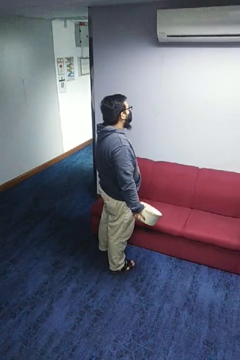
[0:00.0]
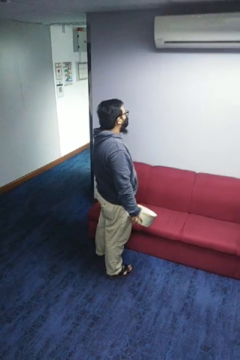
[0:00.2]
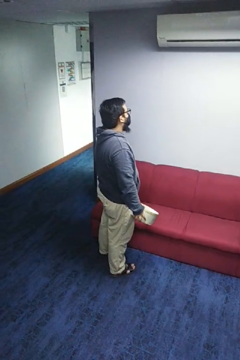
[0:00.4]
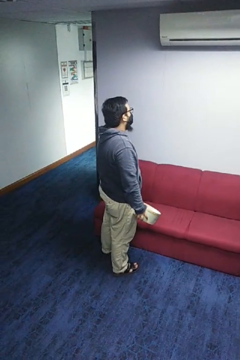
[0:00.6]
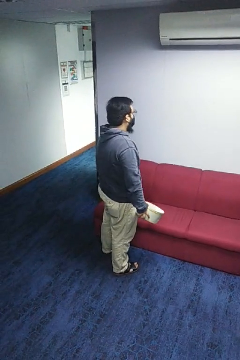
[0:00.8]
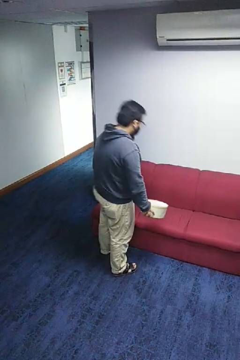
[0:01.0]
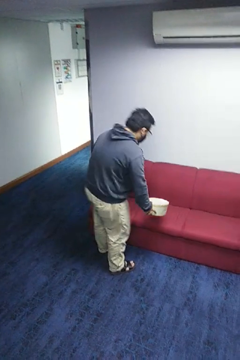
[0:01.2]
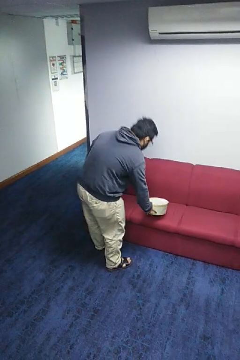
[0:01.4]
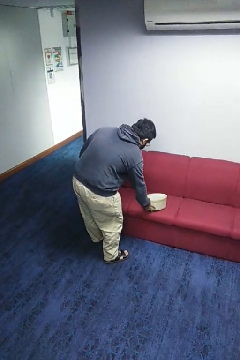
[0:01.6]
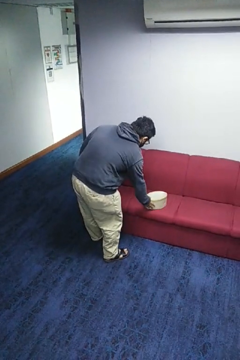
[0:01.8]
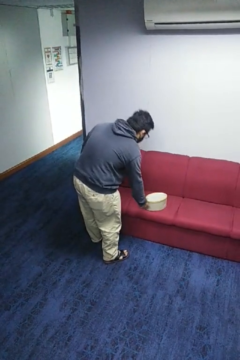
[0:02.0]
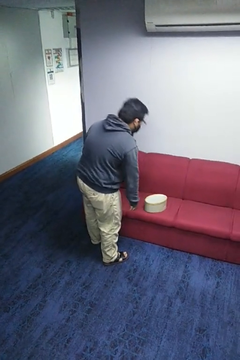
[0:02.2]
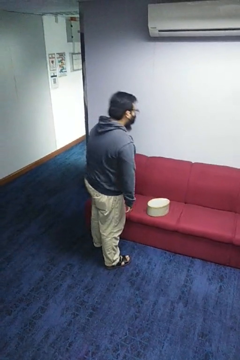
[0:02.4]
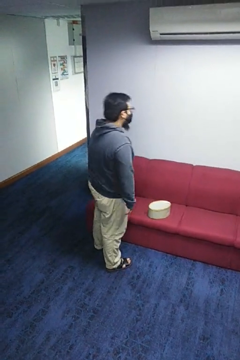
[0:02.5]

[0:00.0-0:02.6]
person puts down object on couch

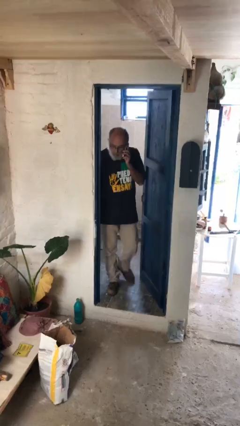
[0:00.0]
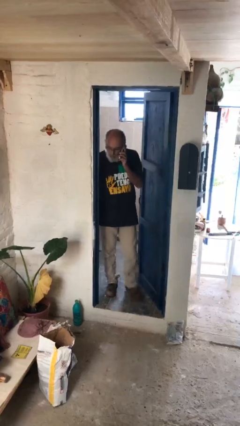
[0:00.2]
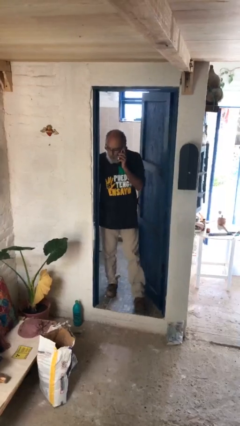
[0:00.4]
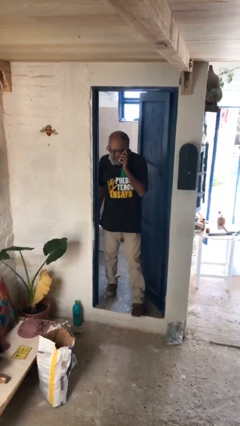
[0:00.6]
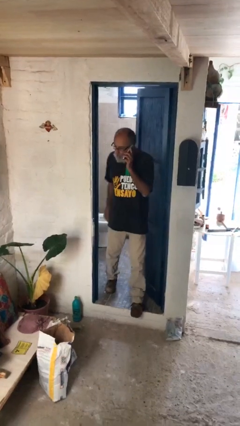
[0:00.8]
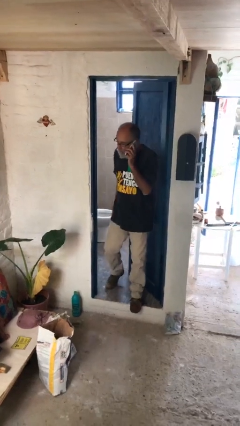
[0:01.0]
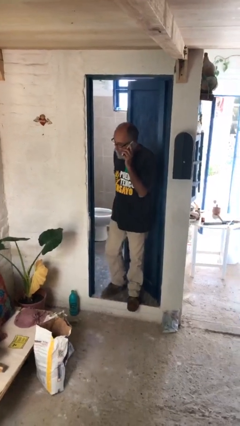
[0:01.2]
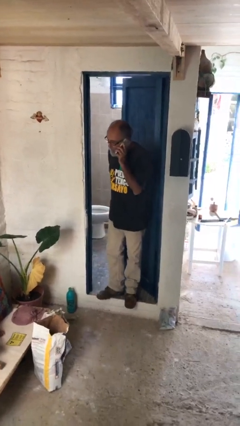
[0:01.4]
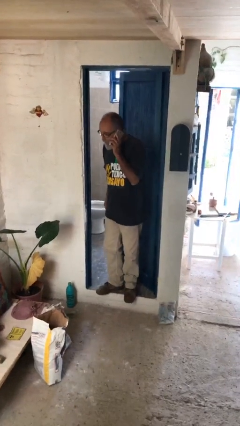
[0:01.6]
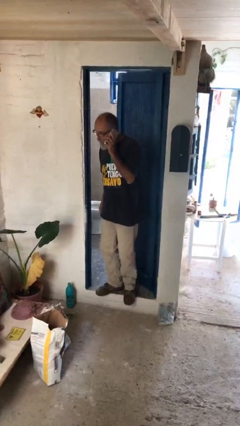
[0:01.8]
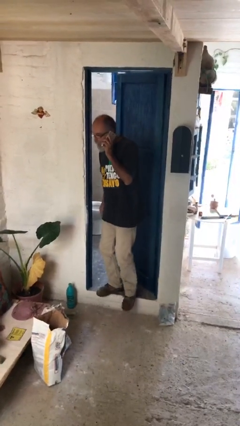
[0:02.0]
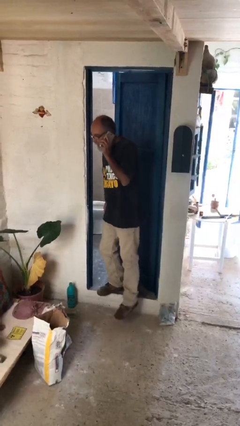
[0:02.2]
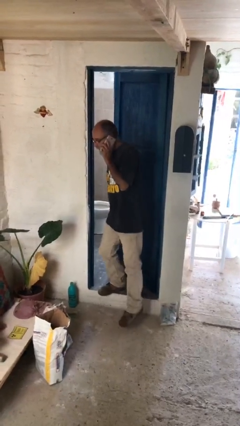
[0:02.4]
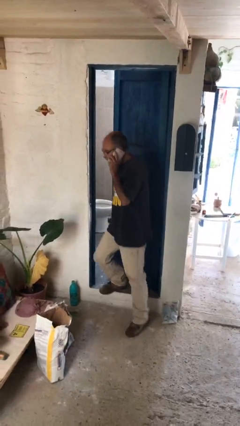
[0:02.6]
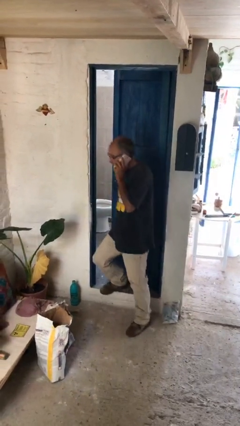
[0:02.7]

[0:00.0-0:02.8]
person enters scene through structure

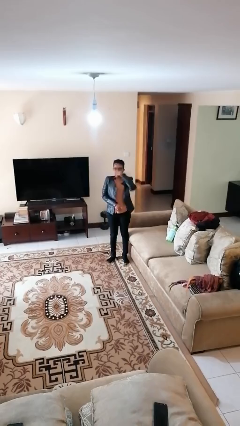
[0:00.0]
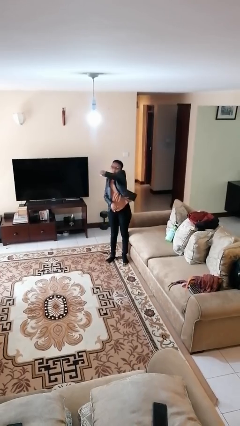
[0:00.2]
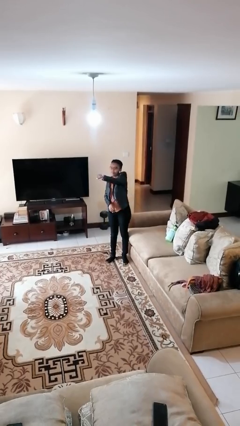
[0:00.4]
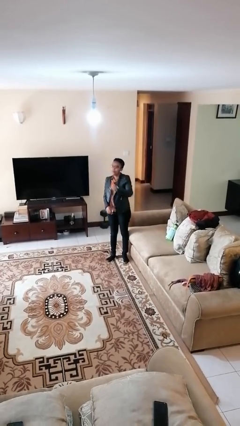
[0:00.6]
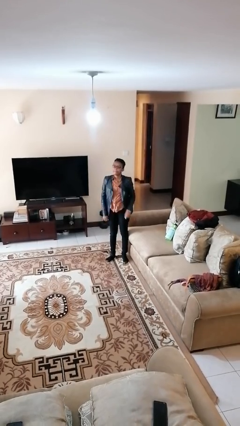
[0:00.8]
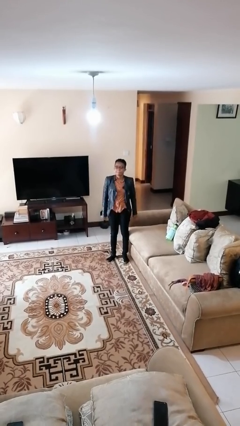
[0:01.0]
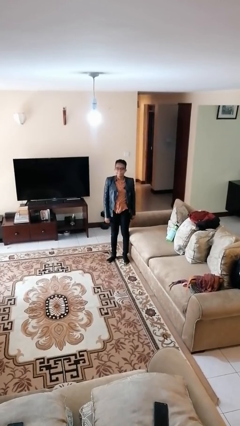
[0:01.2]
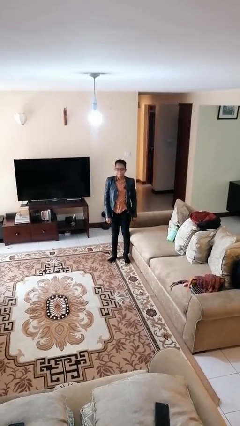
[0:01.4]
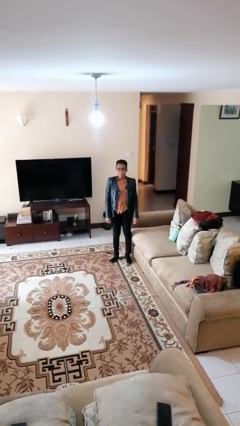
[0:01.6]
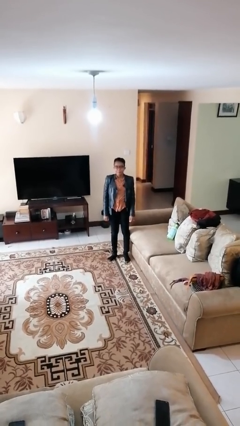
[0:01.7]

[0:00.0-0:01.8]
person punches

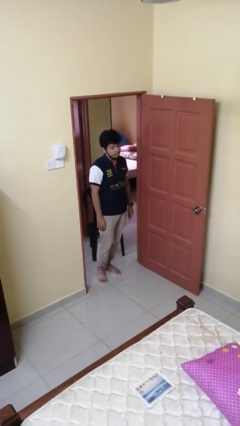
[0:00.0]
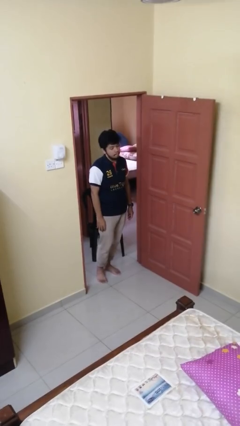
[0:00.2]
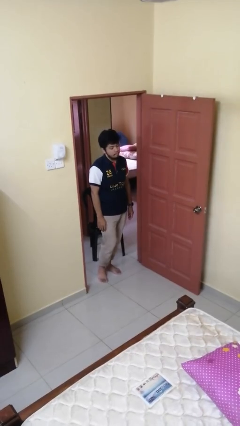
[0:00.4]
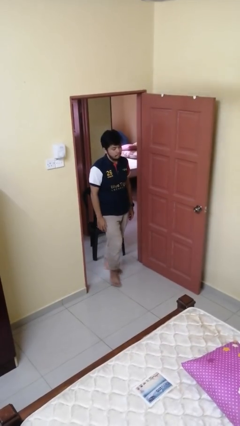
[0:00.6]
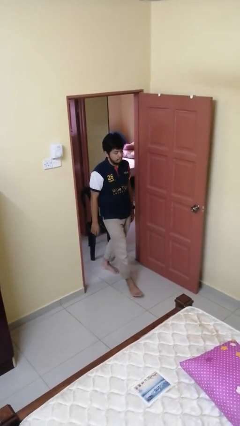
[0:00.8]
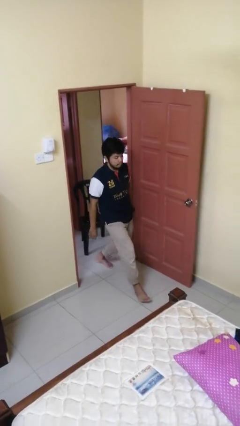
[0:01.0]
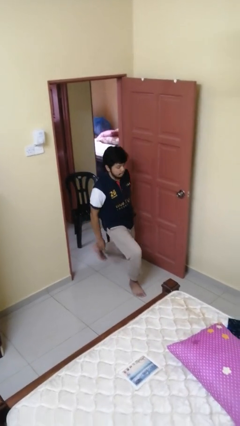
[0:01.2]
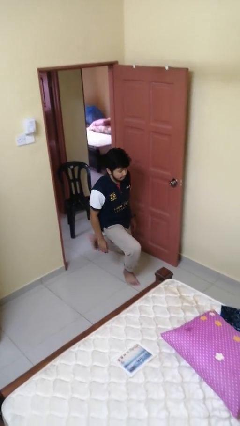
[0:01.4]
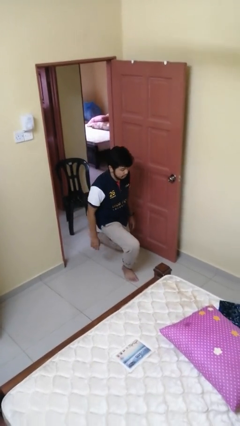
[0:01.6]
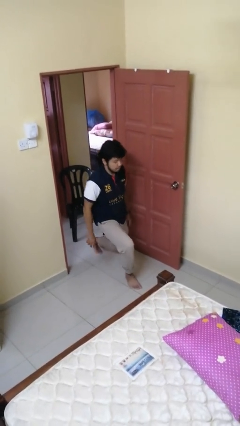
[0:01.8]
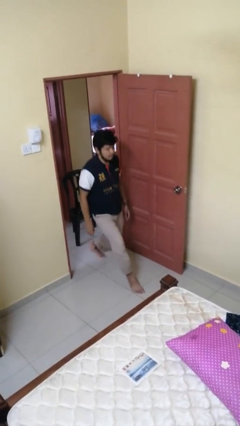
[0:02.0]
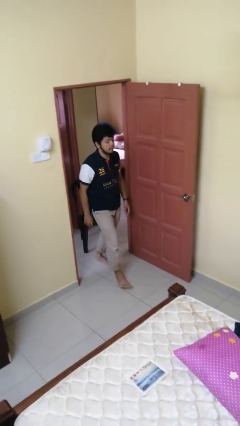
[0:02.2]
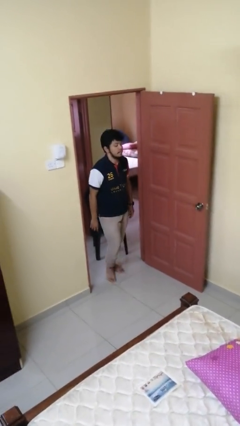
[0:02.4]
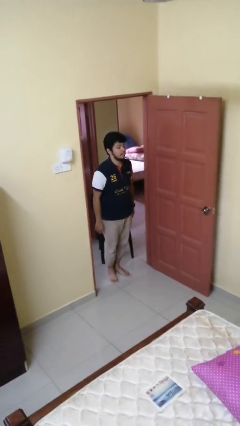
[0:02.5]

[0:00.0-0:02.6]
person exercises with lunges

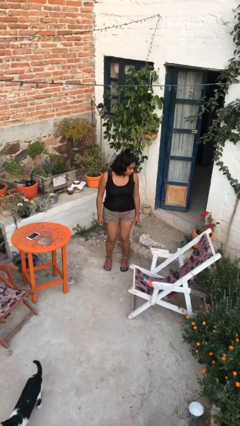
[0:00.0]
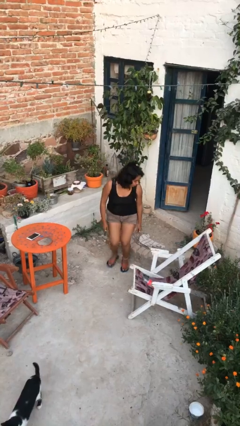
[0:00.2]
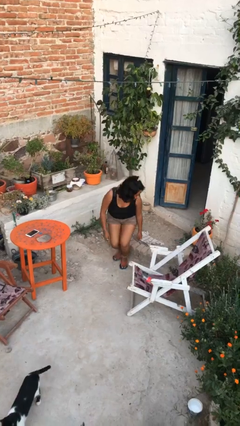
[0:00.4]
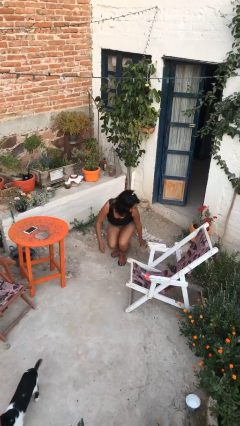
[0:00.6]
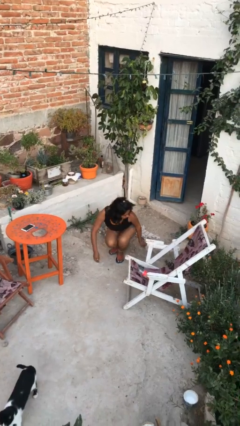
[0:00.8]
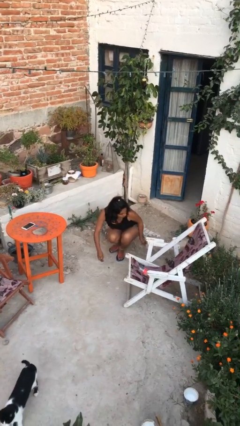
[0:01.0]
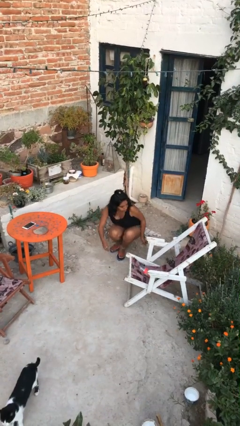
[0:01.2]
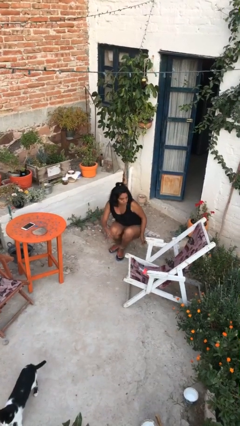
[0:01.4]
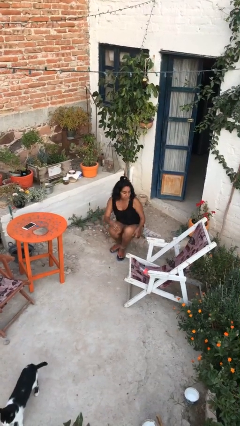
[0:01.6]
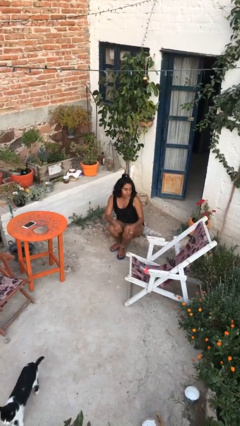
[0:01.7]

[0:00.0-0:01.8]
person sits down

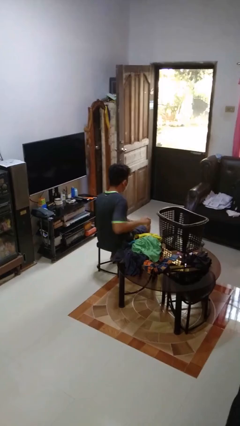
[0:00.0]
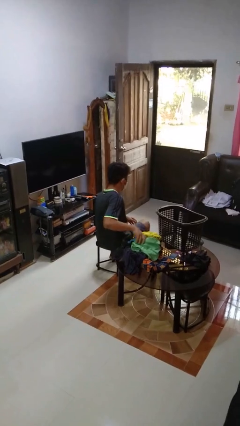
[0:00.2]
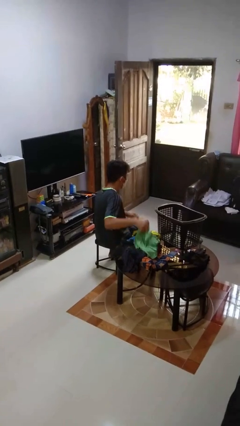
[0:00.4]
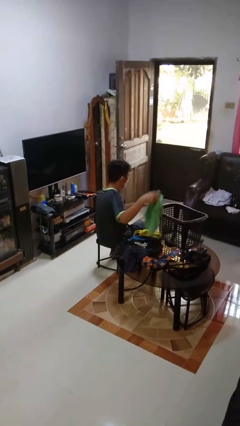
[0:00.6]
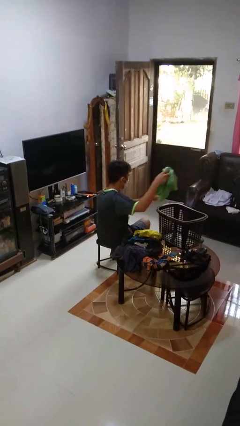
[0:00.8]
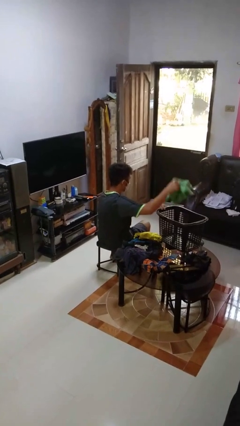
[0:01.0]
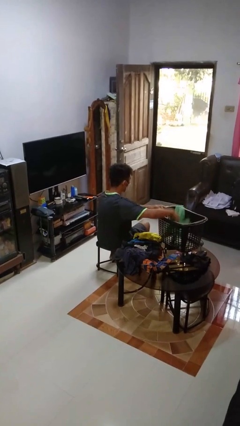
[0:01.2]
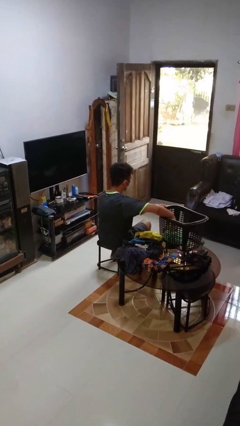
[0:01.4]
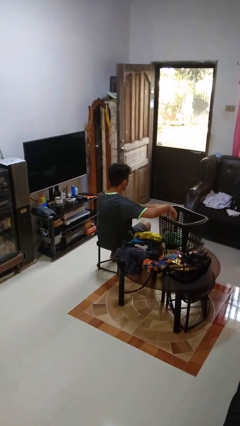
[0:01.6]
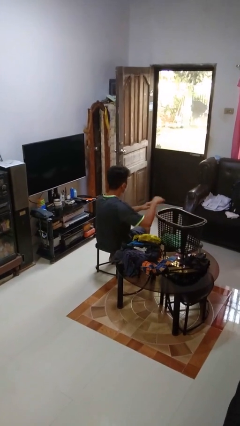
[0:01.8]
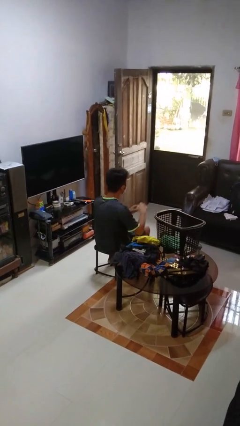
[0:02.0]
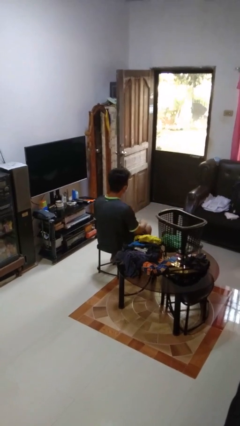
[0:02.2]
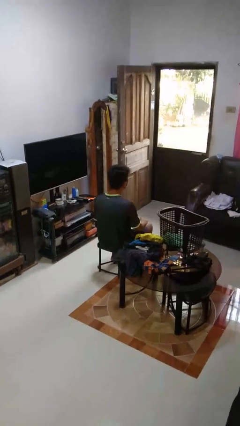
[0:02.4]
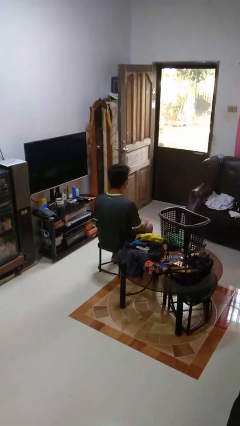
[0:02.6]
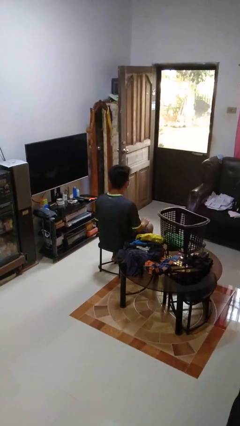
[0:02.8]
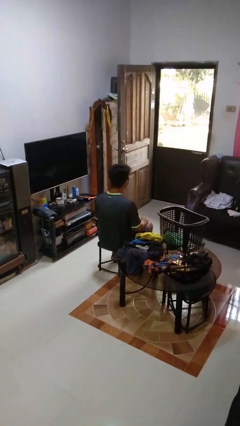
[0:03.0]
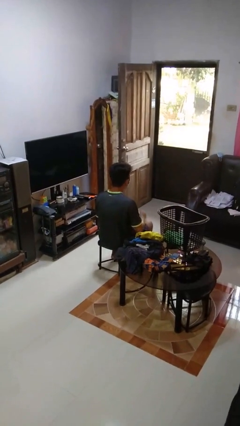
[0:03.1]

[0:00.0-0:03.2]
person puts object into basket

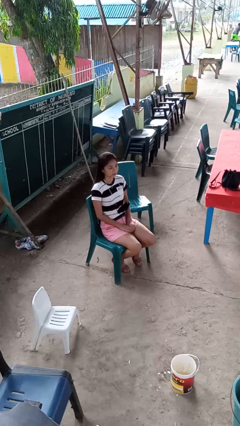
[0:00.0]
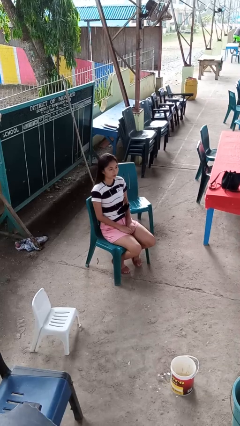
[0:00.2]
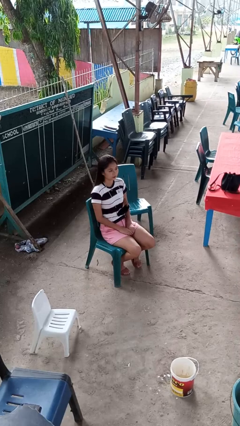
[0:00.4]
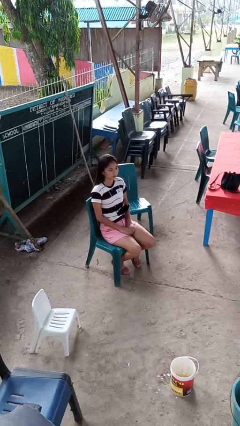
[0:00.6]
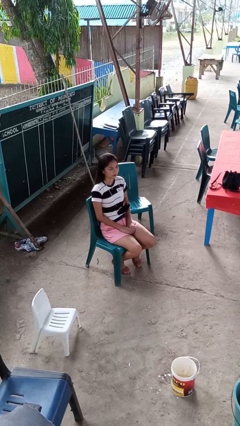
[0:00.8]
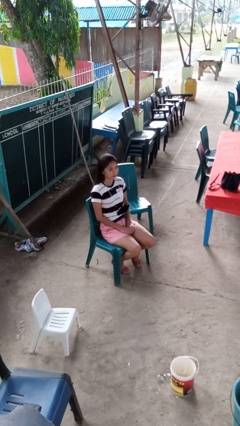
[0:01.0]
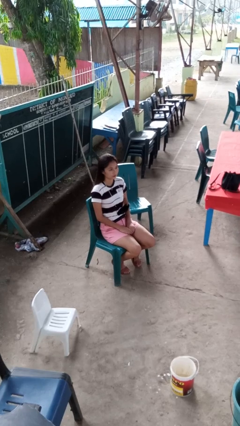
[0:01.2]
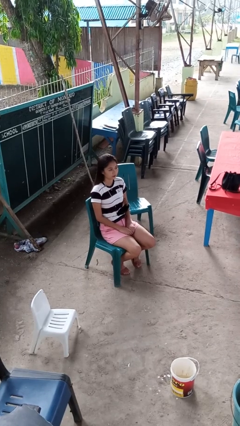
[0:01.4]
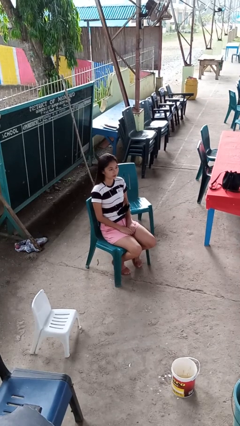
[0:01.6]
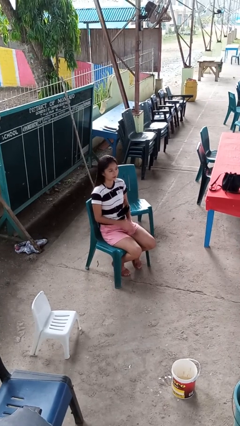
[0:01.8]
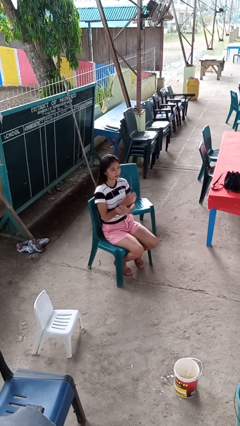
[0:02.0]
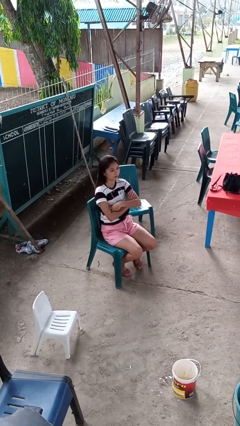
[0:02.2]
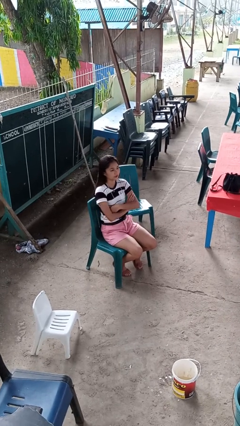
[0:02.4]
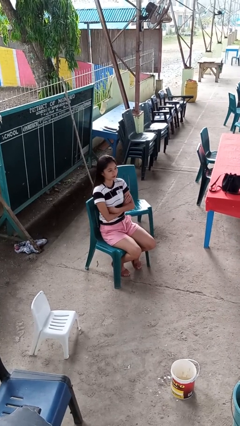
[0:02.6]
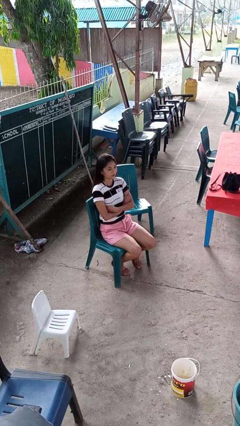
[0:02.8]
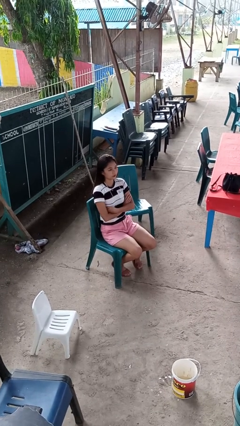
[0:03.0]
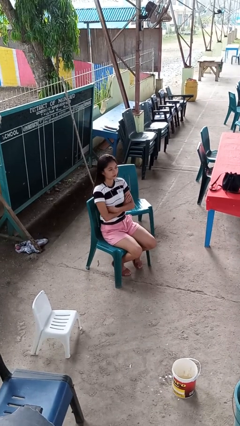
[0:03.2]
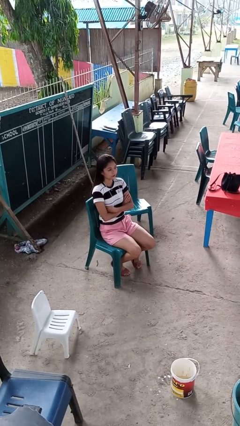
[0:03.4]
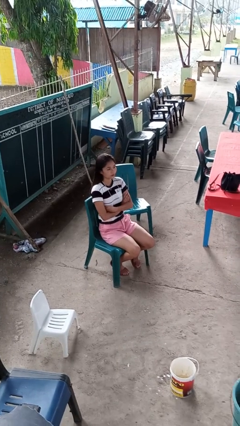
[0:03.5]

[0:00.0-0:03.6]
person gestures arms x
